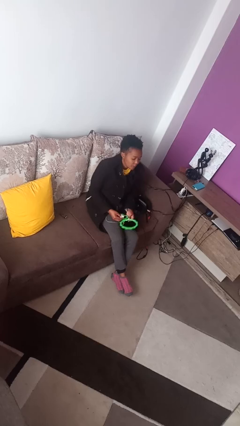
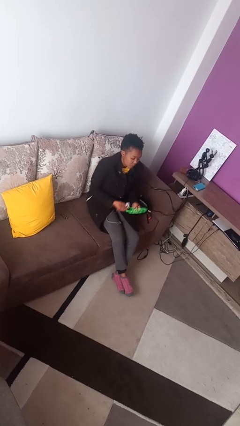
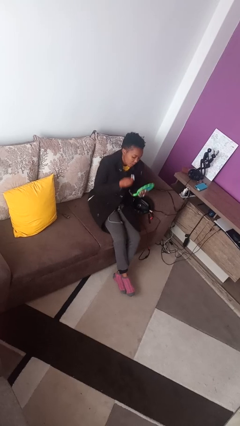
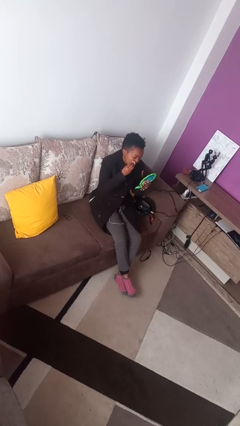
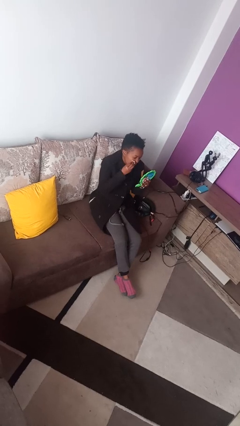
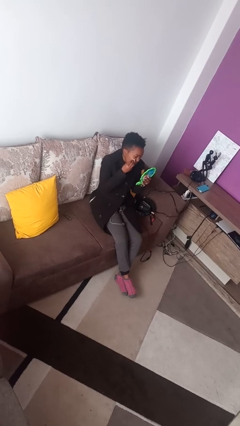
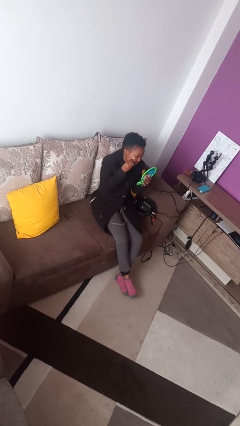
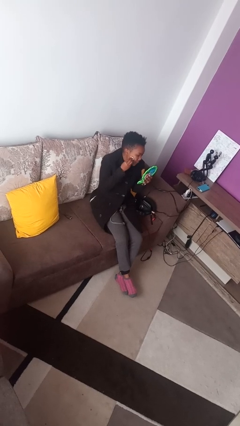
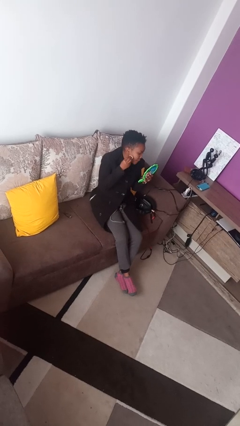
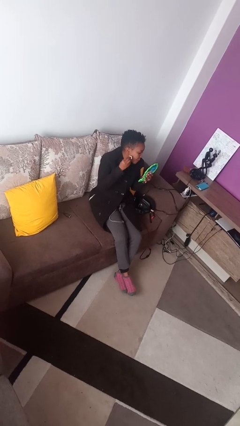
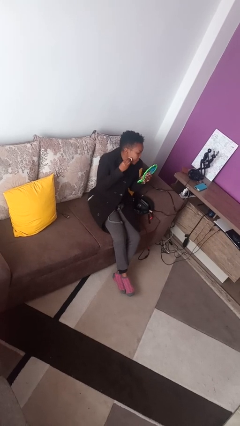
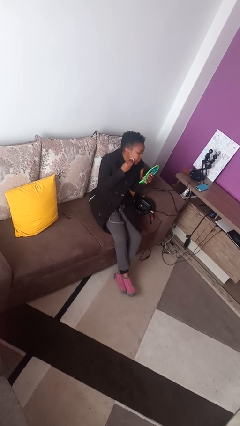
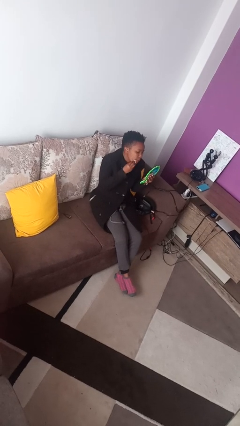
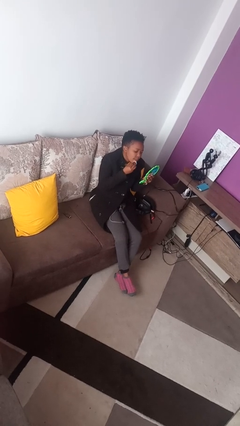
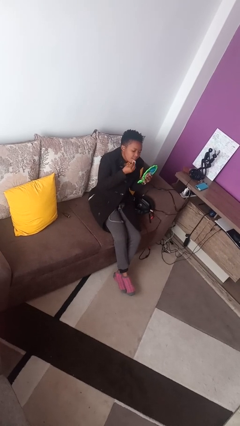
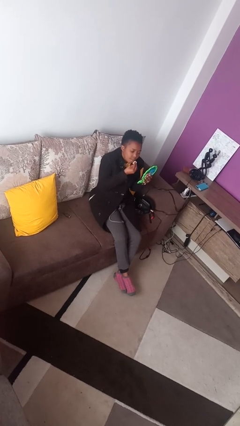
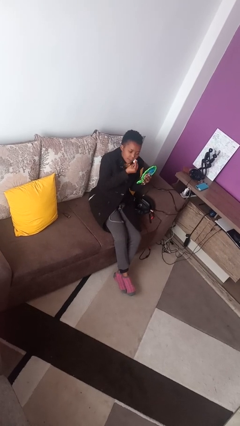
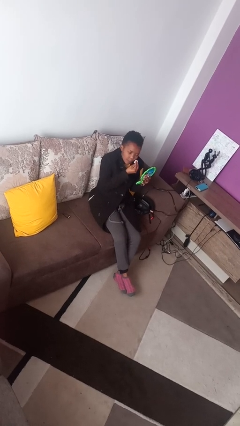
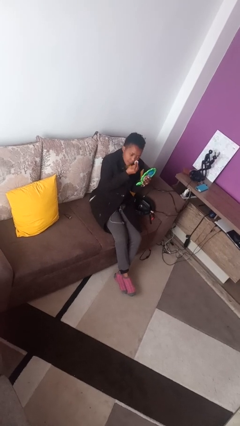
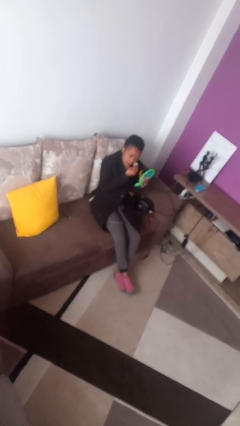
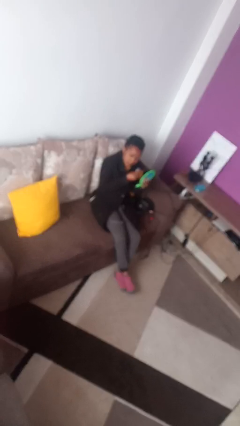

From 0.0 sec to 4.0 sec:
person applies foundation makeup

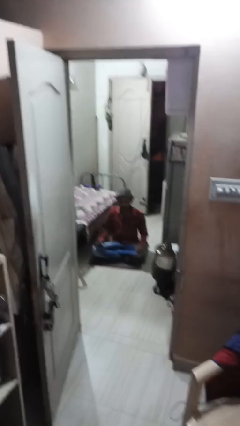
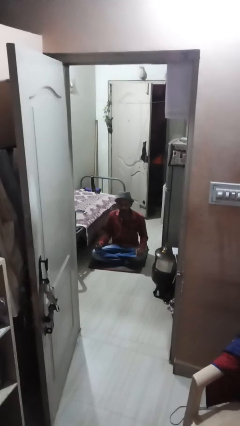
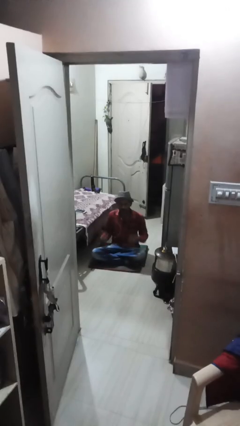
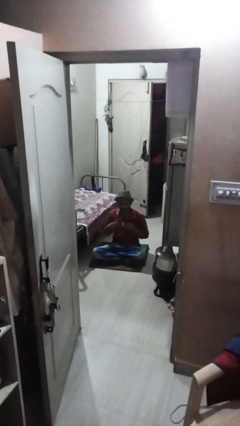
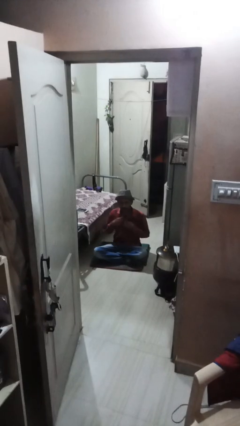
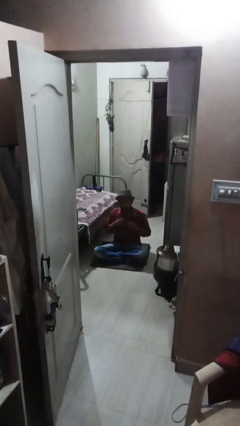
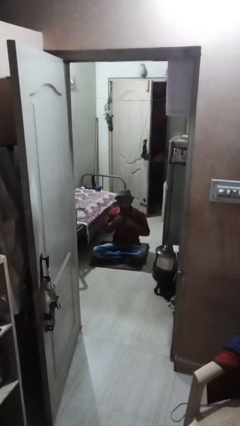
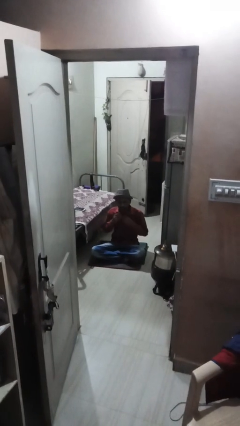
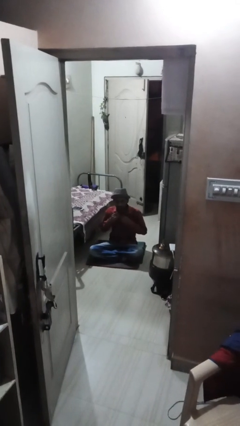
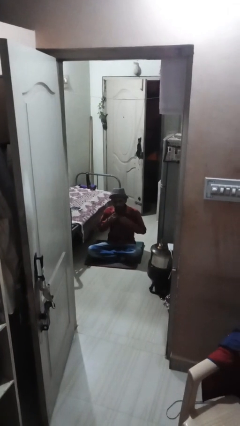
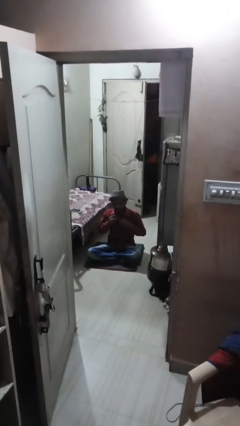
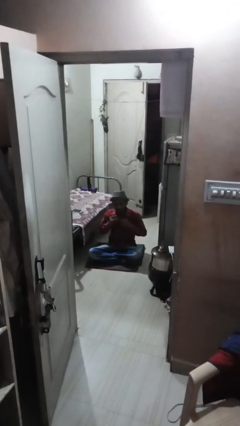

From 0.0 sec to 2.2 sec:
person buttons shirt

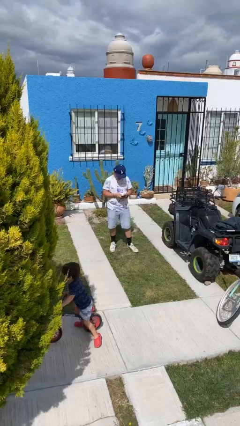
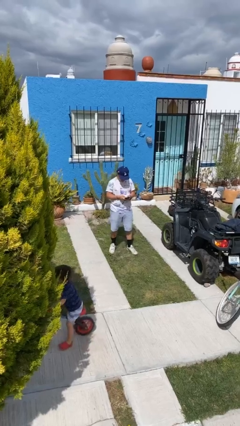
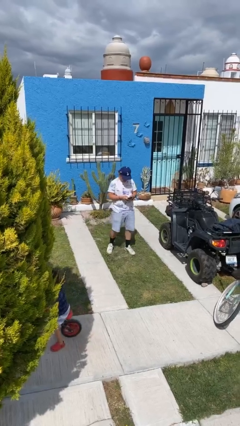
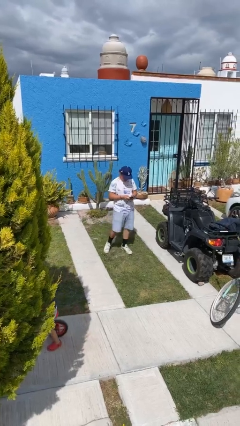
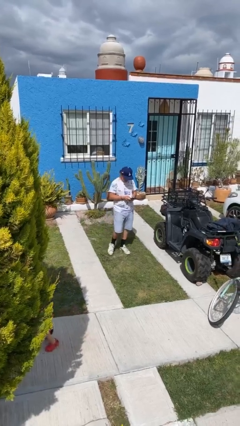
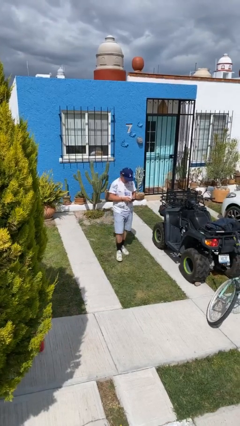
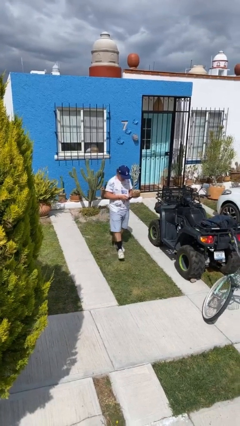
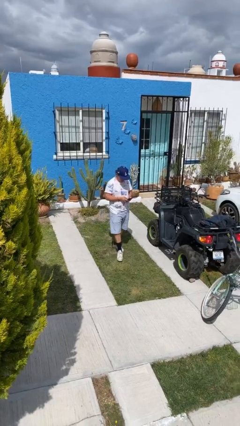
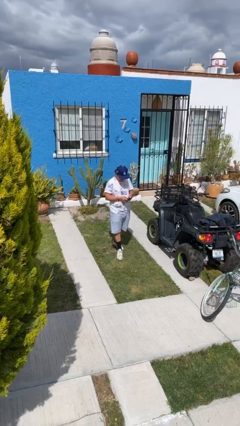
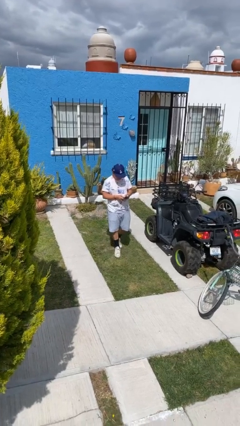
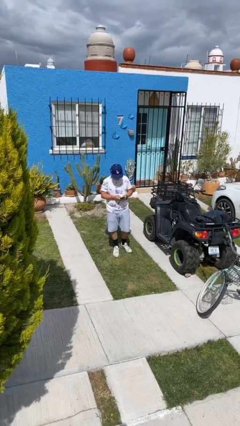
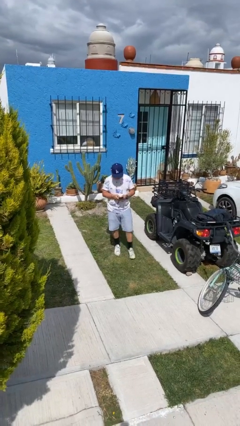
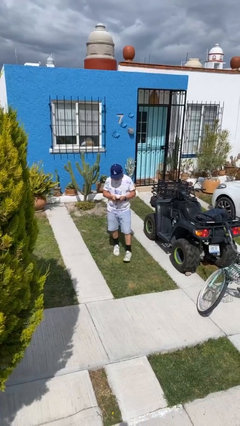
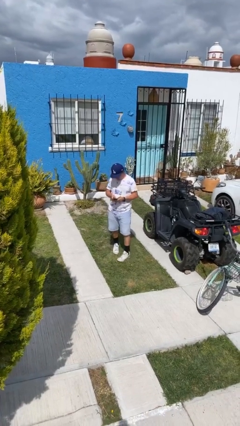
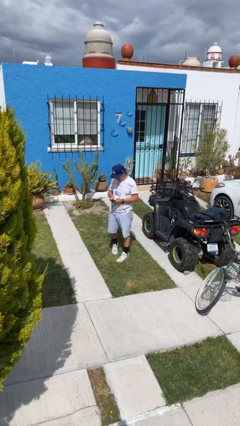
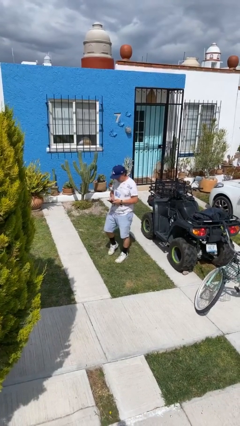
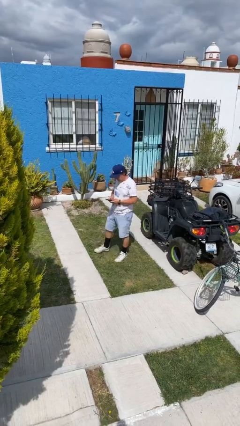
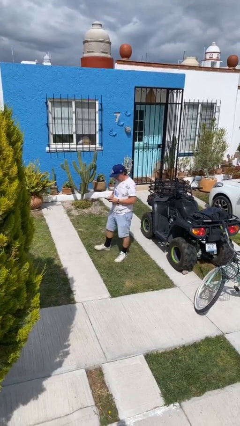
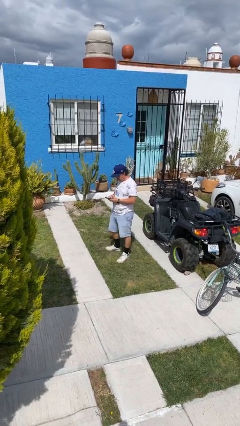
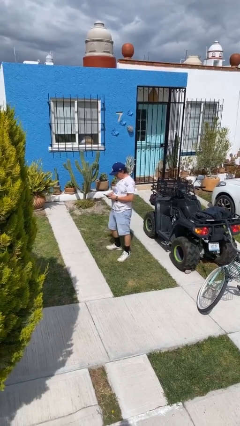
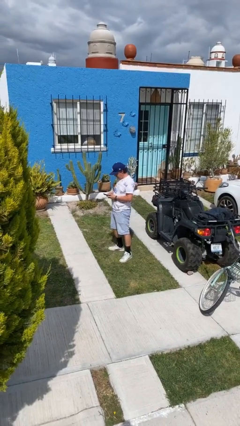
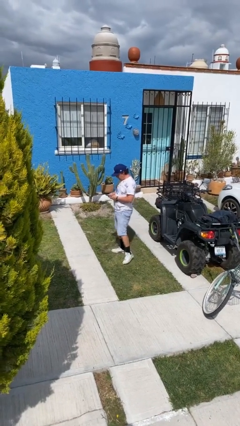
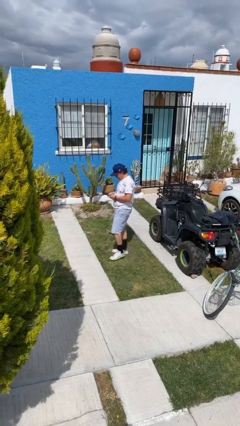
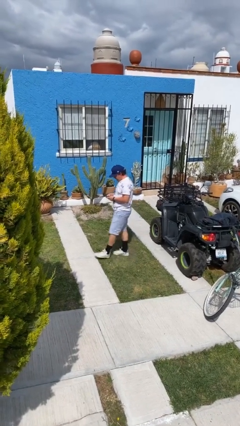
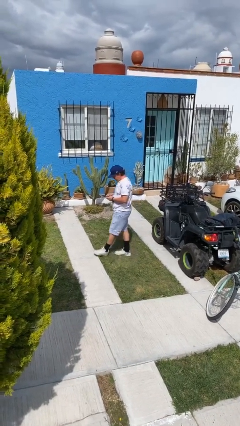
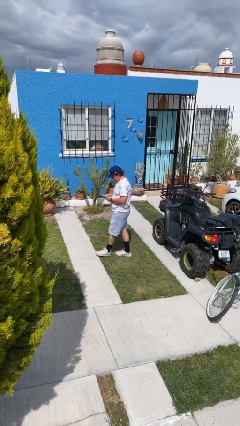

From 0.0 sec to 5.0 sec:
person texts on phone

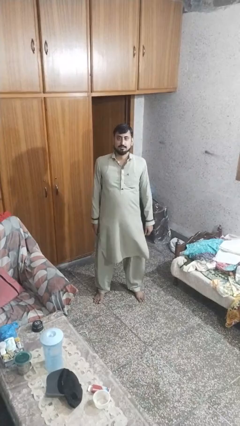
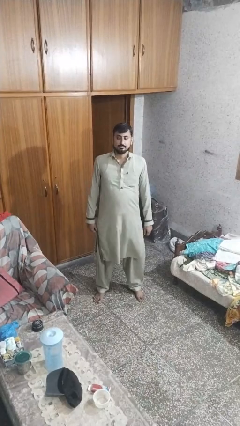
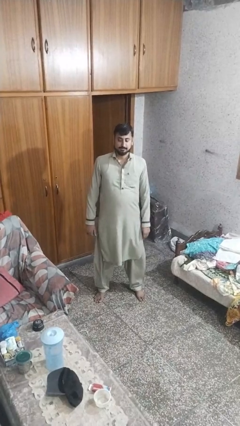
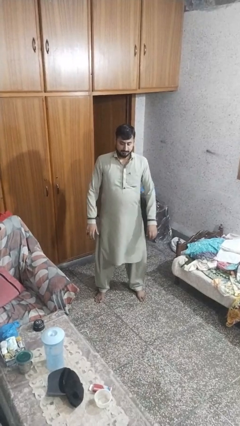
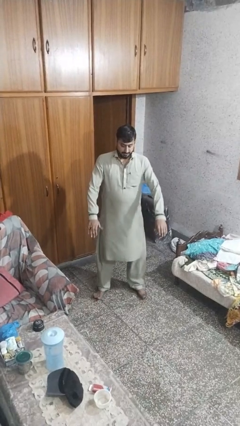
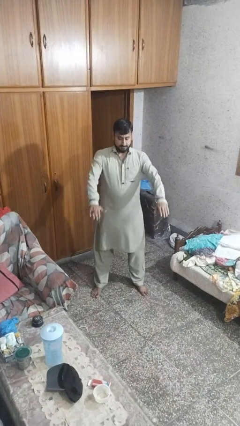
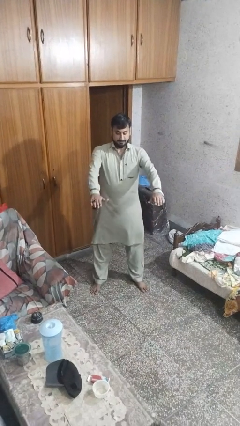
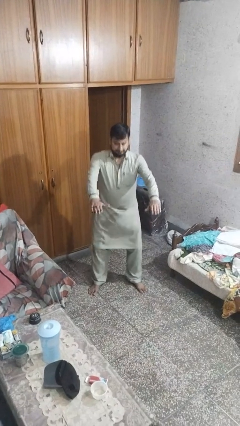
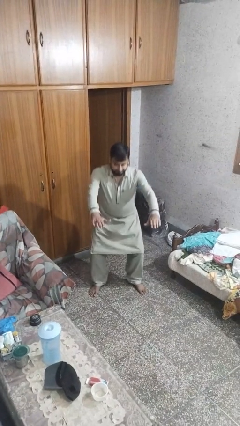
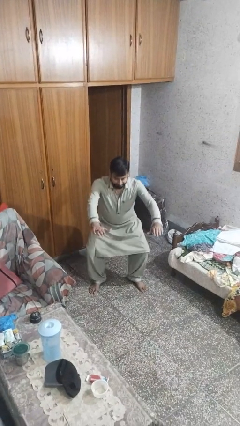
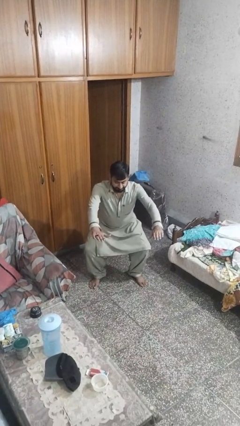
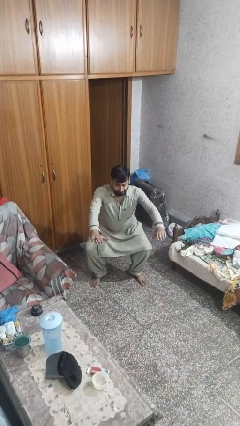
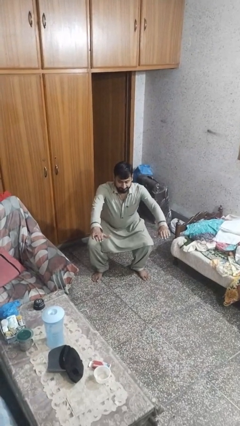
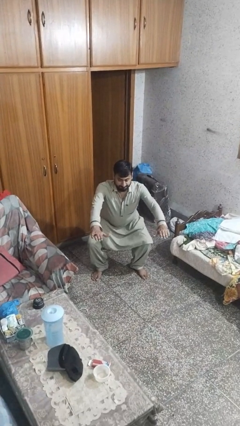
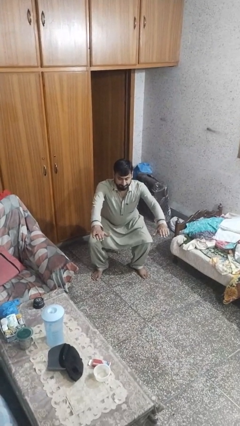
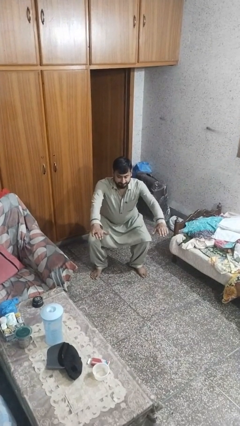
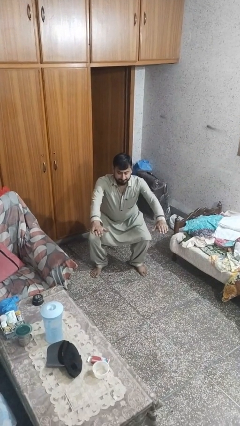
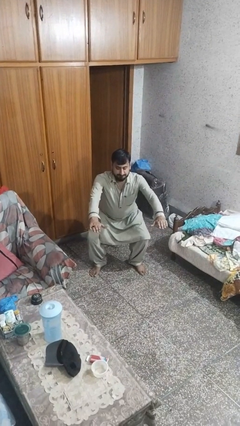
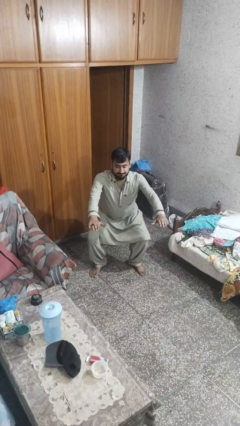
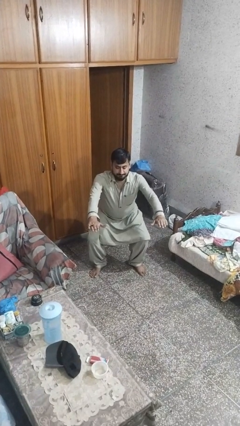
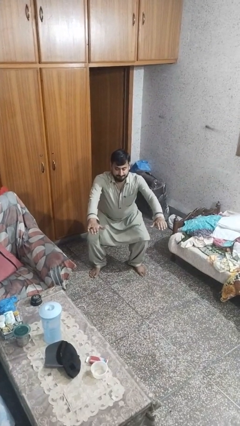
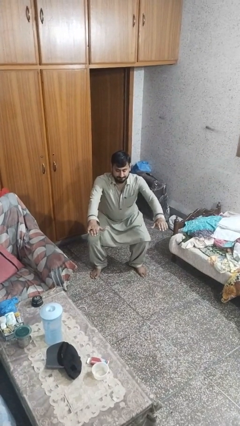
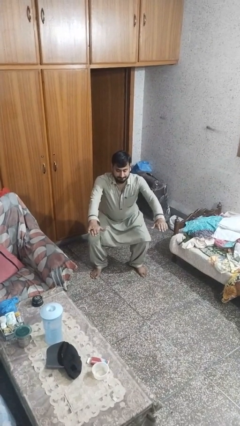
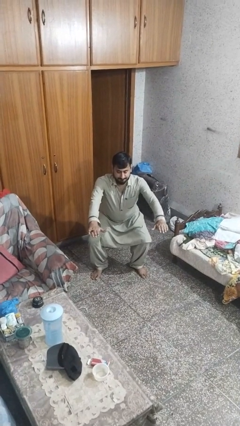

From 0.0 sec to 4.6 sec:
person squats

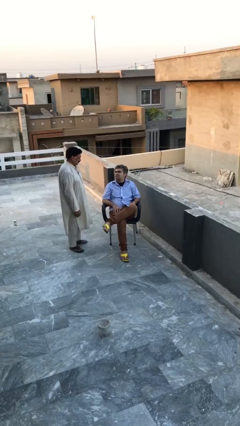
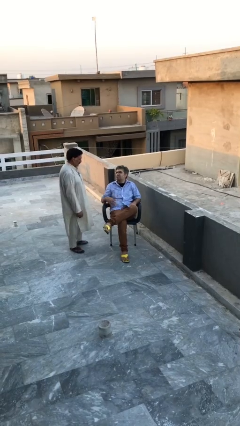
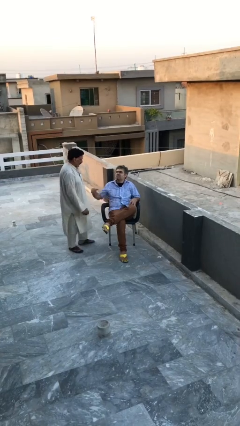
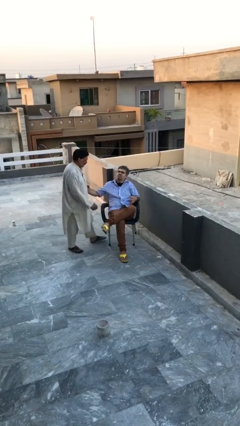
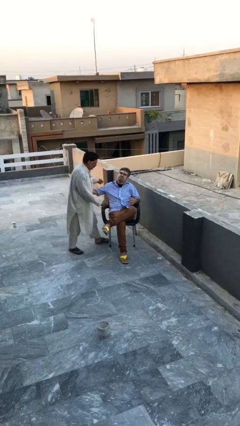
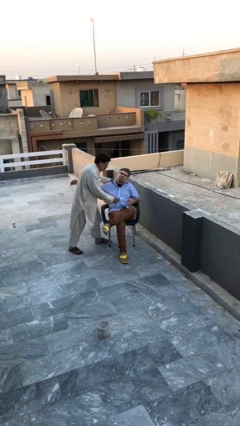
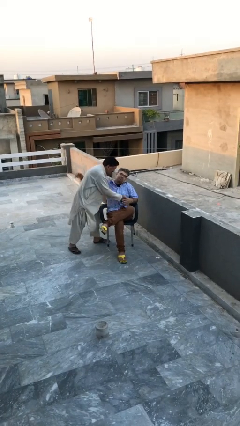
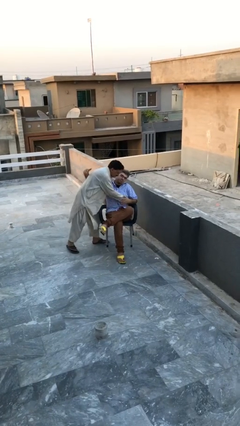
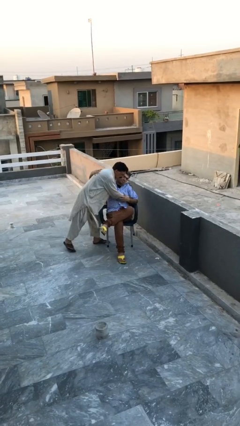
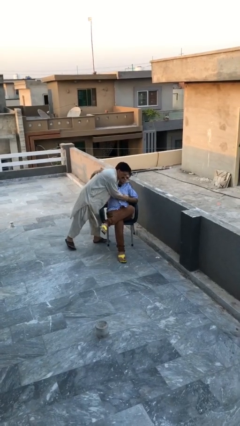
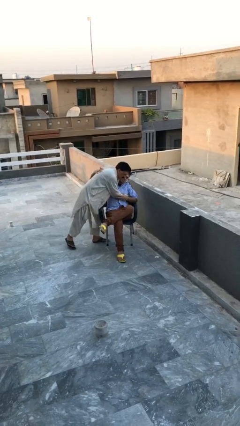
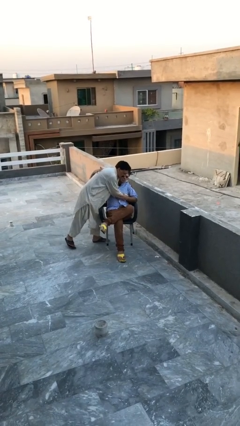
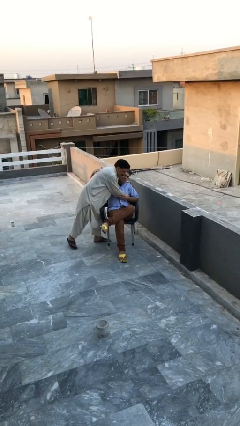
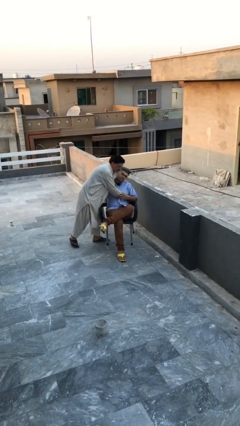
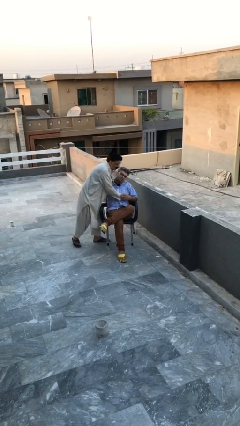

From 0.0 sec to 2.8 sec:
person embraces person
